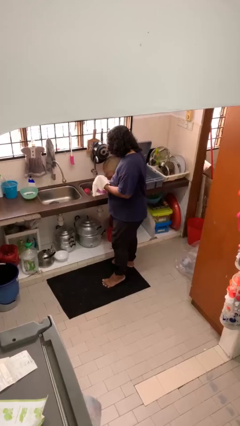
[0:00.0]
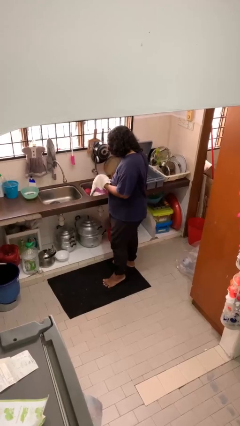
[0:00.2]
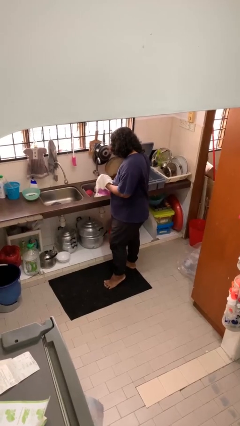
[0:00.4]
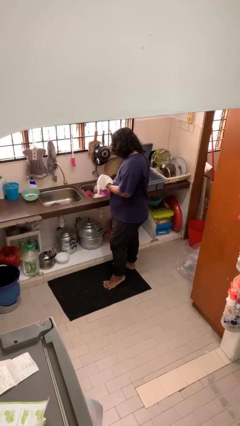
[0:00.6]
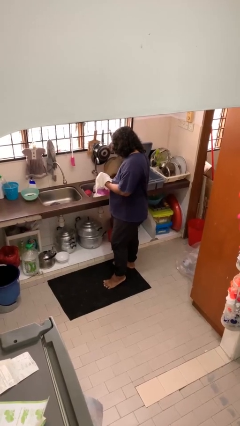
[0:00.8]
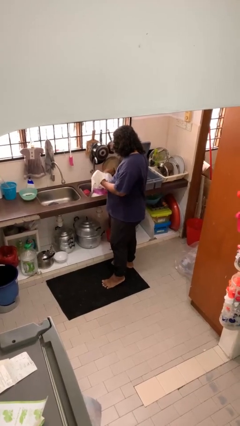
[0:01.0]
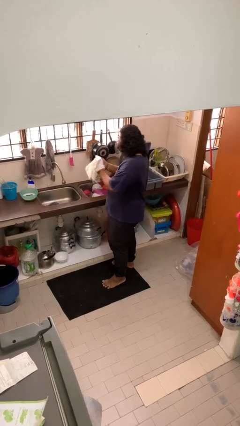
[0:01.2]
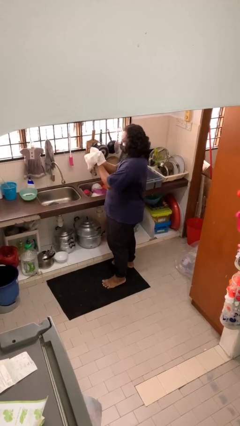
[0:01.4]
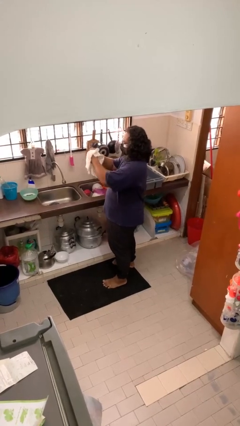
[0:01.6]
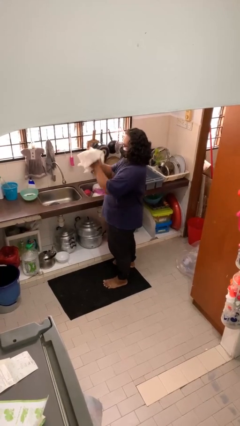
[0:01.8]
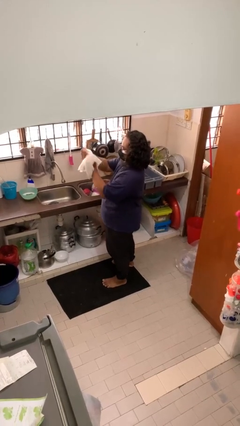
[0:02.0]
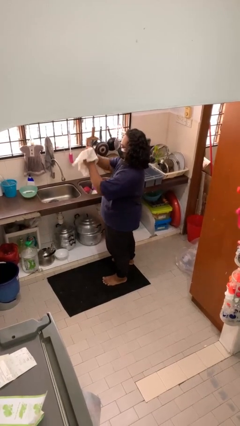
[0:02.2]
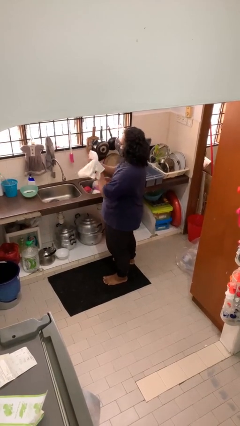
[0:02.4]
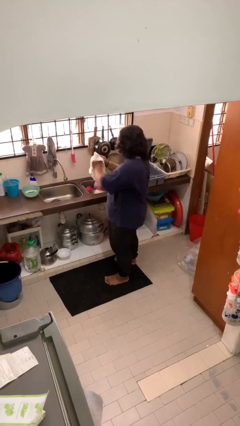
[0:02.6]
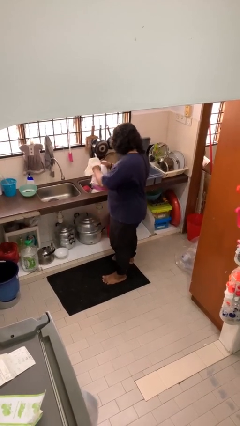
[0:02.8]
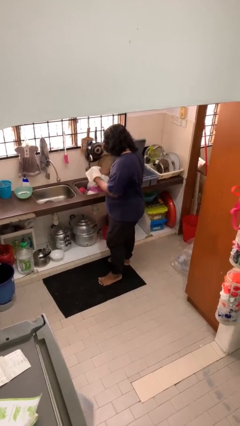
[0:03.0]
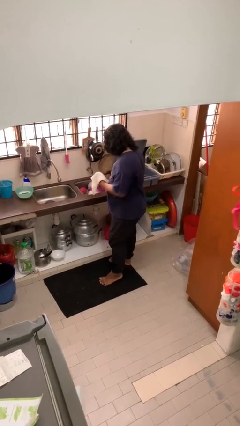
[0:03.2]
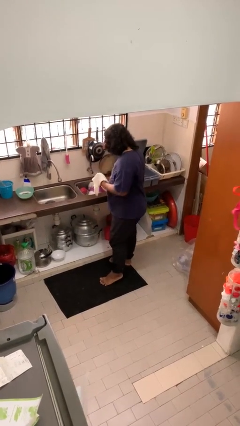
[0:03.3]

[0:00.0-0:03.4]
person dries dish

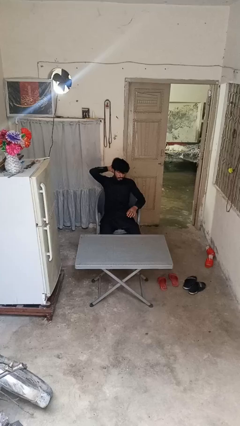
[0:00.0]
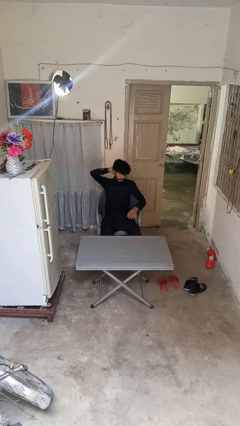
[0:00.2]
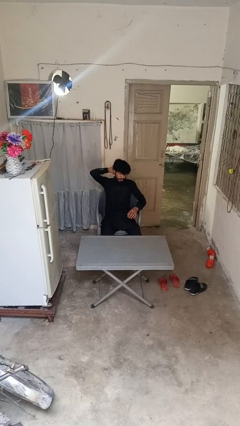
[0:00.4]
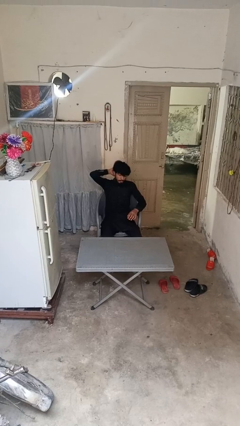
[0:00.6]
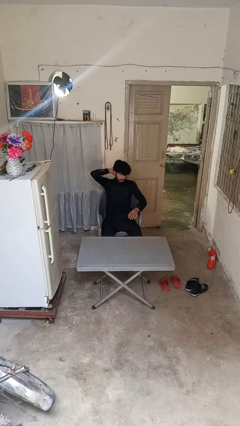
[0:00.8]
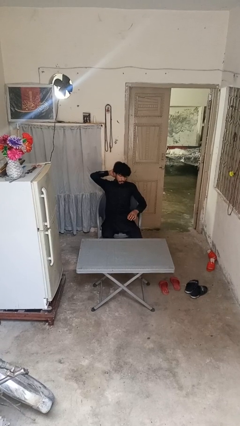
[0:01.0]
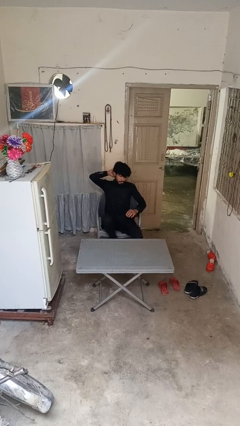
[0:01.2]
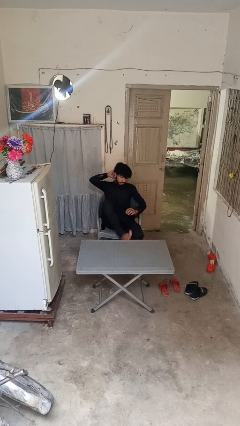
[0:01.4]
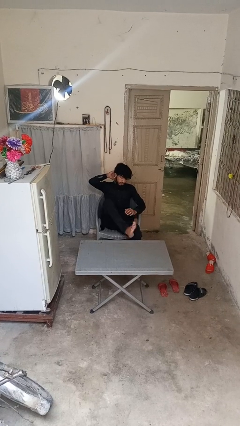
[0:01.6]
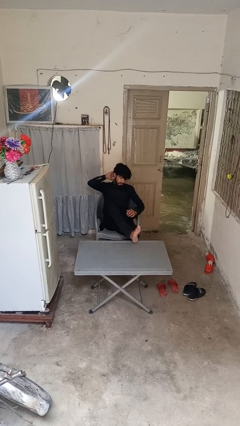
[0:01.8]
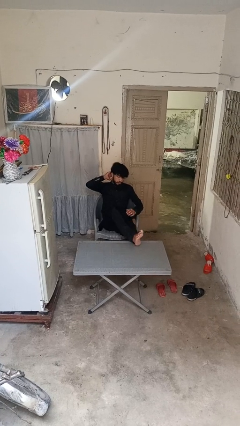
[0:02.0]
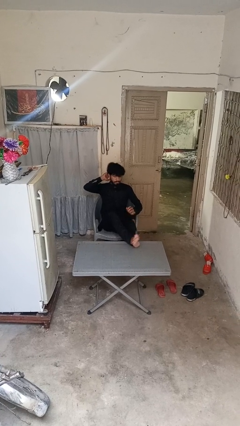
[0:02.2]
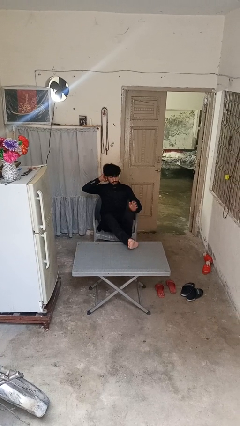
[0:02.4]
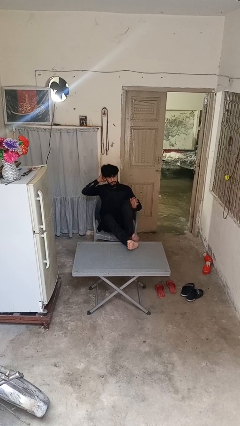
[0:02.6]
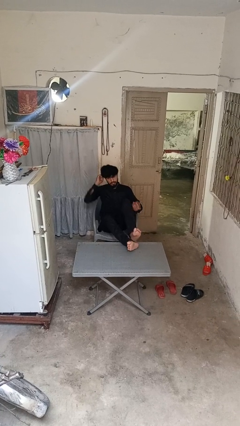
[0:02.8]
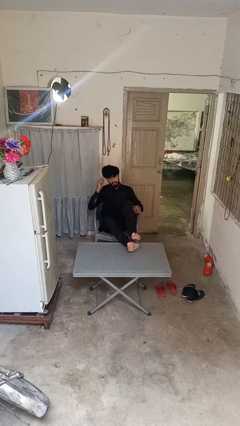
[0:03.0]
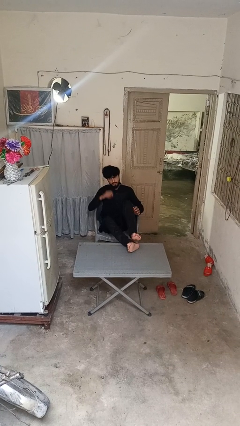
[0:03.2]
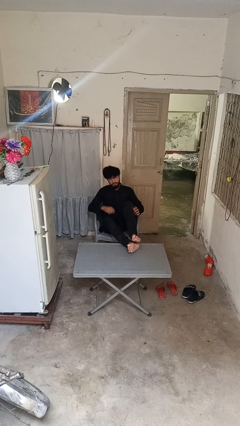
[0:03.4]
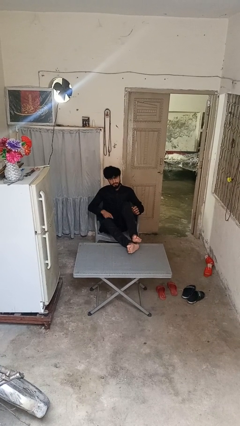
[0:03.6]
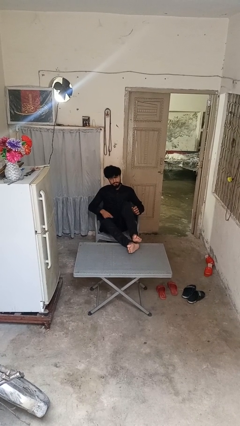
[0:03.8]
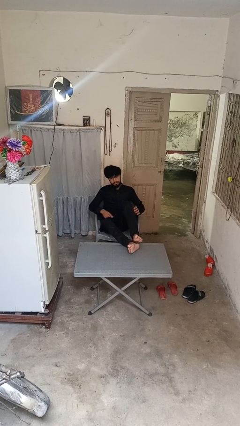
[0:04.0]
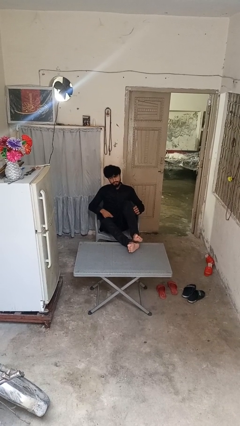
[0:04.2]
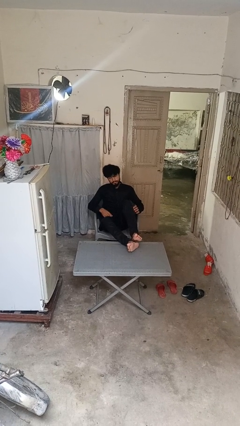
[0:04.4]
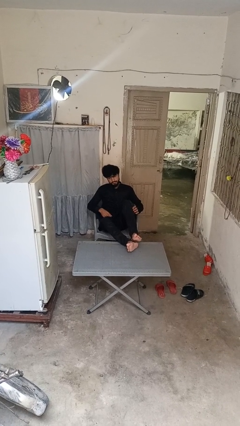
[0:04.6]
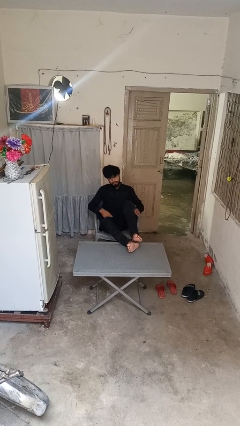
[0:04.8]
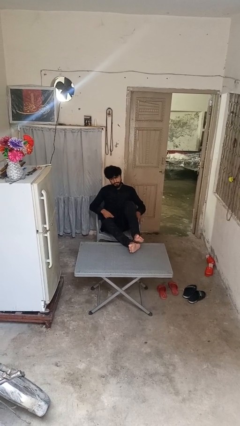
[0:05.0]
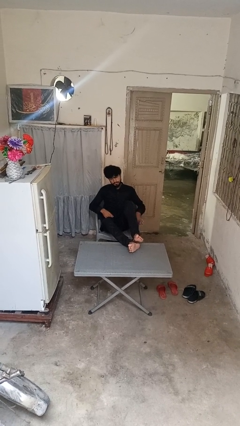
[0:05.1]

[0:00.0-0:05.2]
person puts feet up

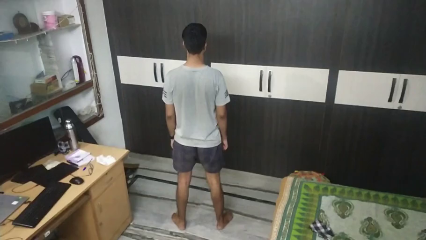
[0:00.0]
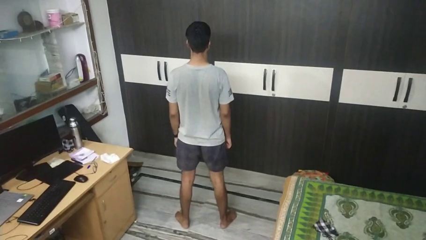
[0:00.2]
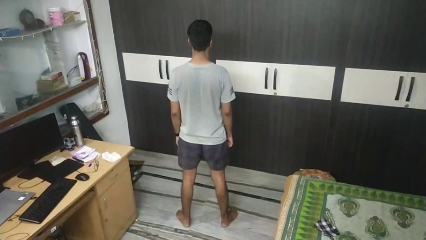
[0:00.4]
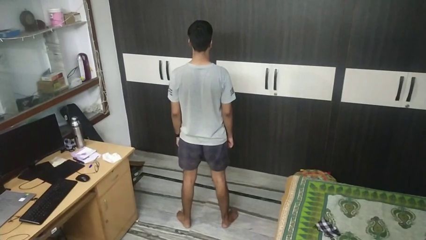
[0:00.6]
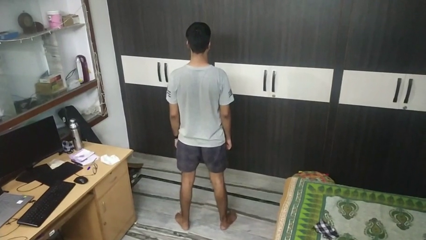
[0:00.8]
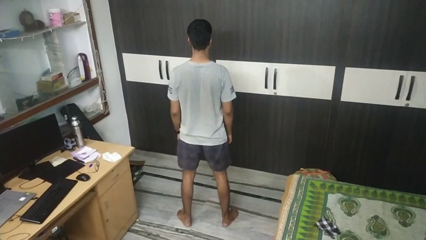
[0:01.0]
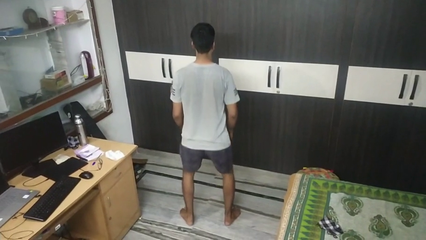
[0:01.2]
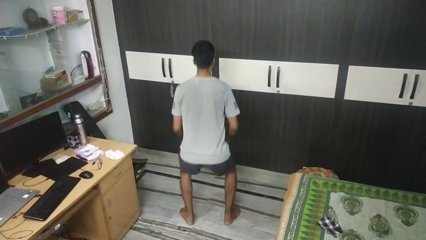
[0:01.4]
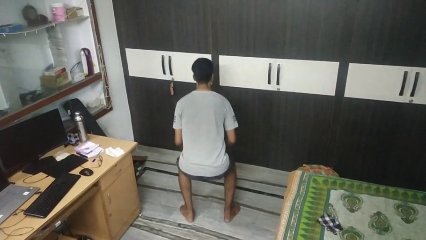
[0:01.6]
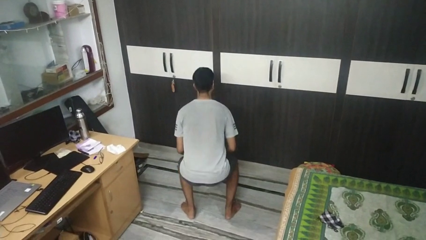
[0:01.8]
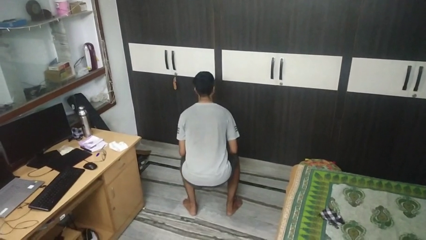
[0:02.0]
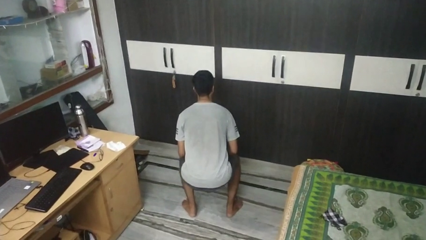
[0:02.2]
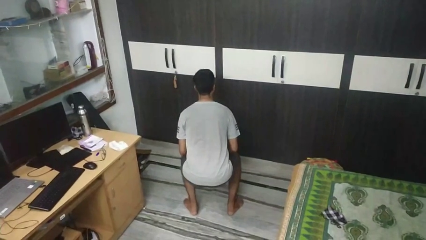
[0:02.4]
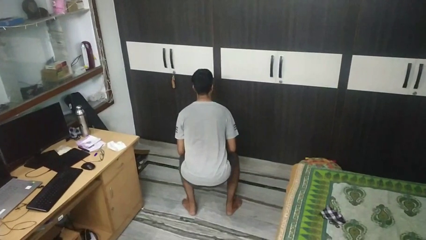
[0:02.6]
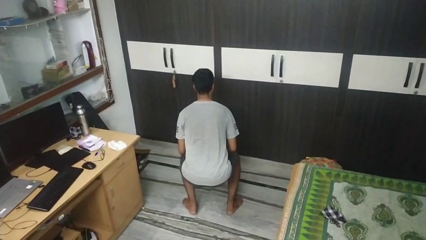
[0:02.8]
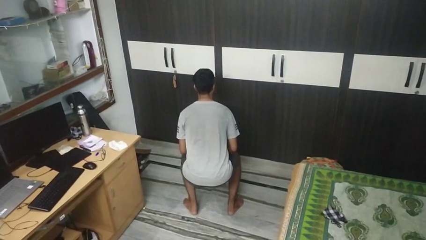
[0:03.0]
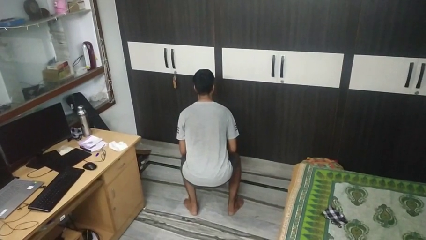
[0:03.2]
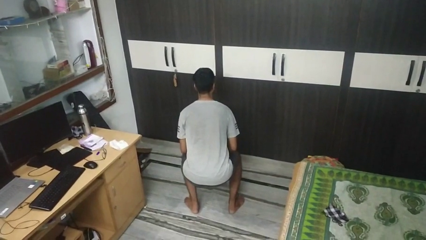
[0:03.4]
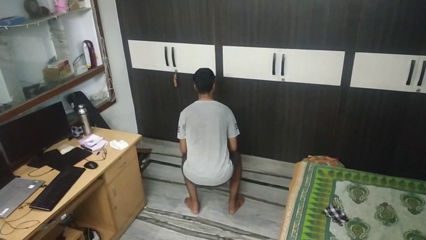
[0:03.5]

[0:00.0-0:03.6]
person squats

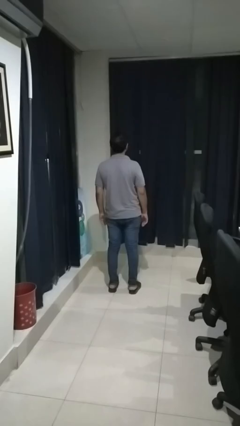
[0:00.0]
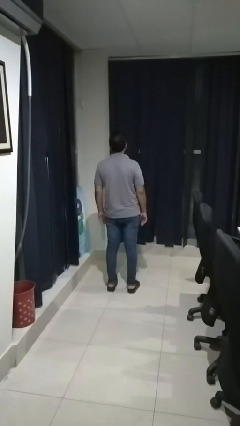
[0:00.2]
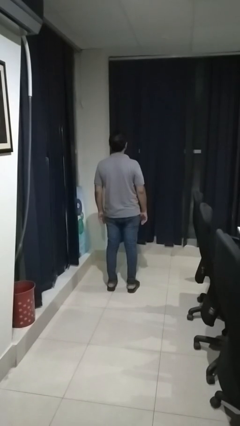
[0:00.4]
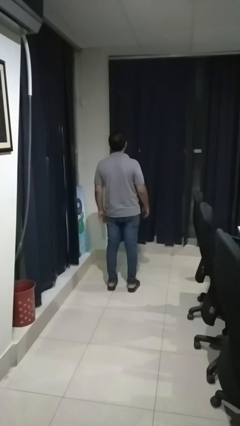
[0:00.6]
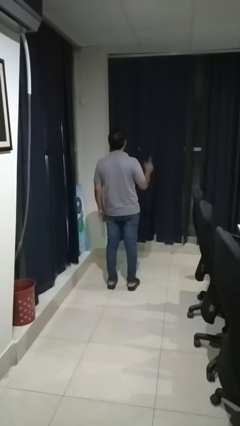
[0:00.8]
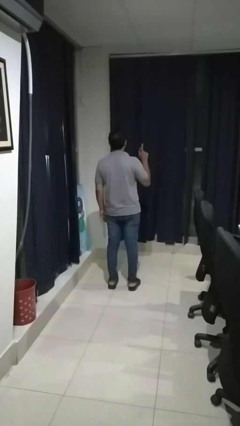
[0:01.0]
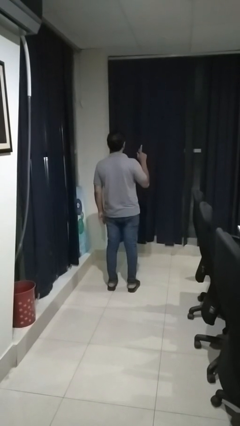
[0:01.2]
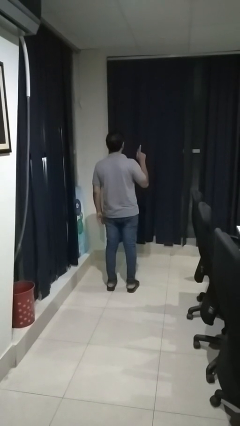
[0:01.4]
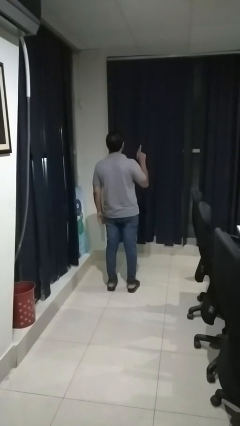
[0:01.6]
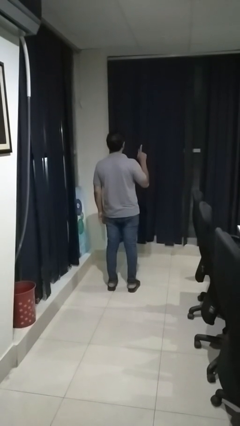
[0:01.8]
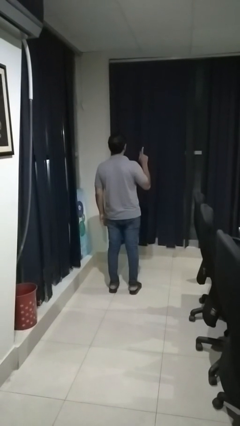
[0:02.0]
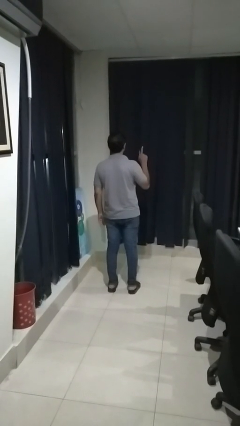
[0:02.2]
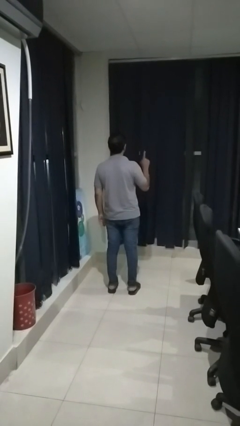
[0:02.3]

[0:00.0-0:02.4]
person gestures number one

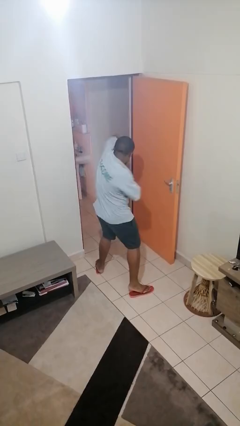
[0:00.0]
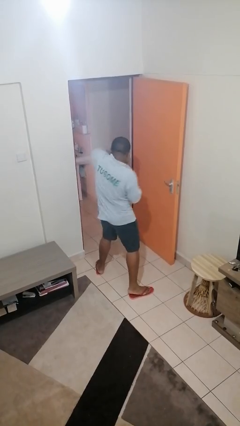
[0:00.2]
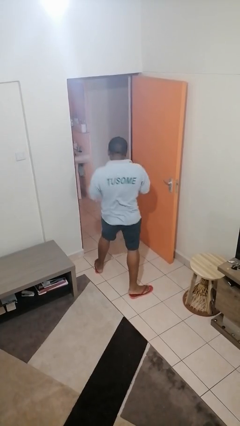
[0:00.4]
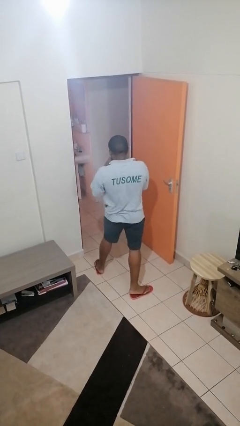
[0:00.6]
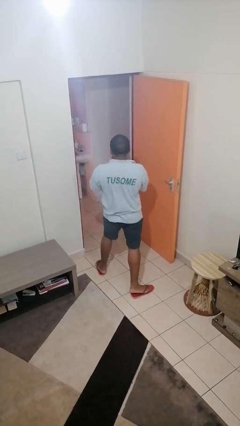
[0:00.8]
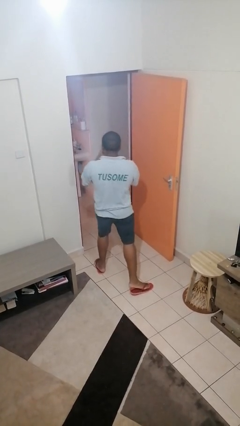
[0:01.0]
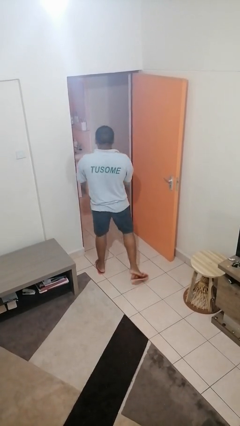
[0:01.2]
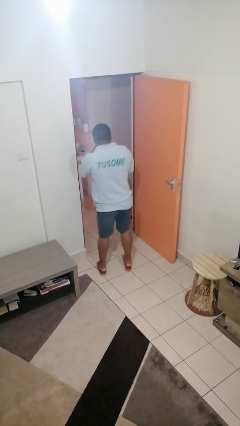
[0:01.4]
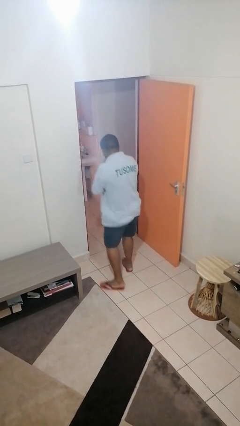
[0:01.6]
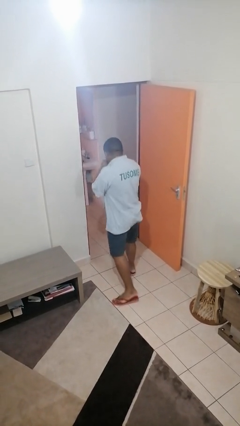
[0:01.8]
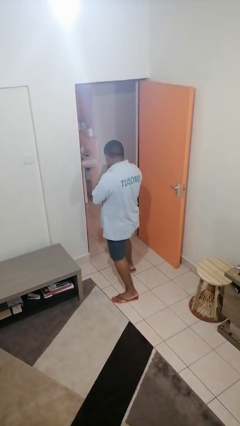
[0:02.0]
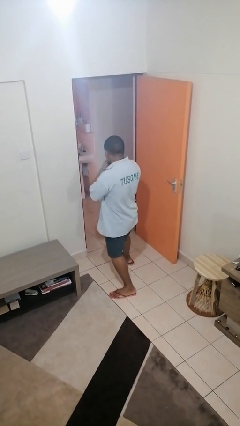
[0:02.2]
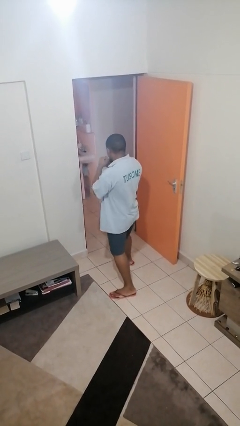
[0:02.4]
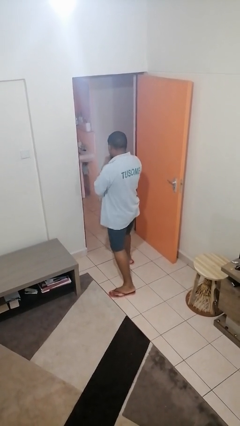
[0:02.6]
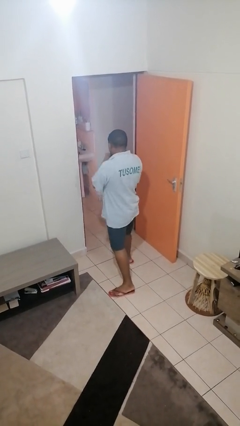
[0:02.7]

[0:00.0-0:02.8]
person punches

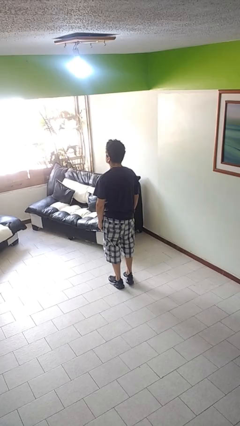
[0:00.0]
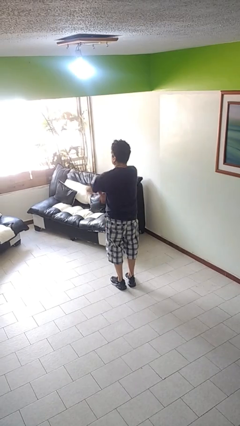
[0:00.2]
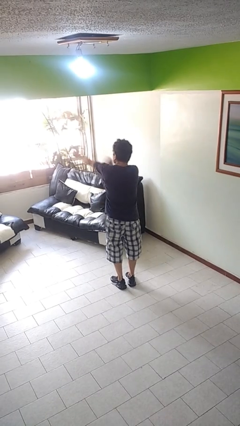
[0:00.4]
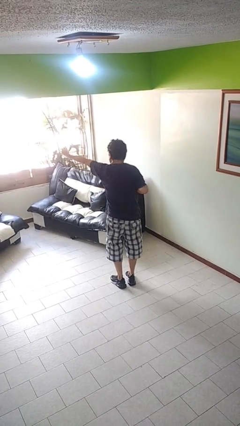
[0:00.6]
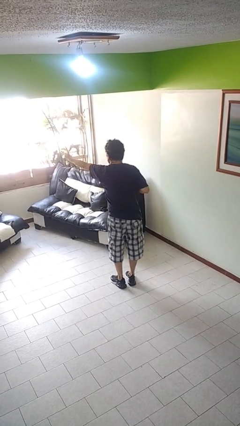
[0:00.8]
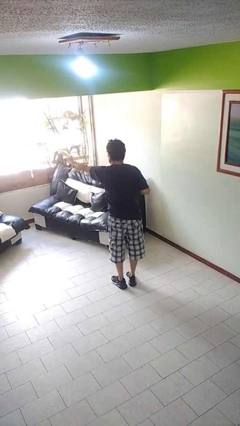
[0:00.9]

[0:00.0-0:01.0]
person karate chop
